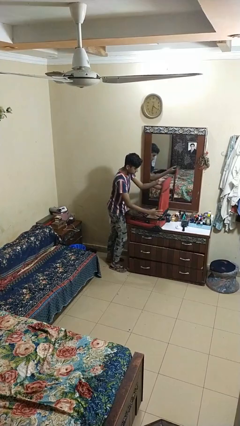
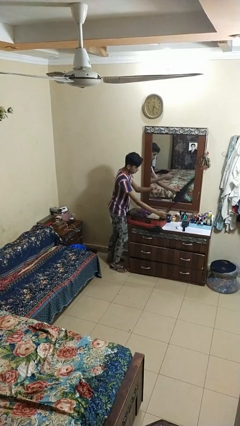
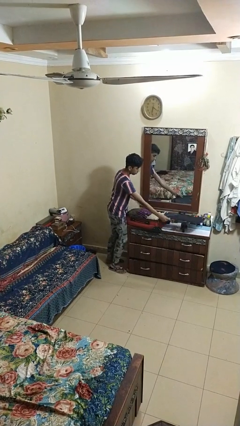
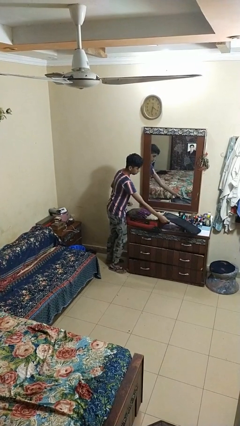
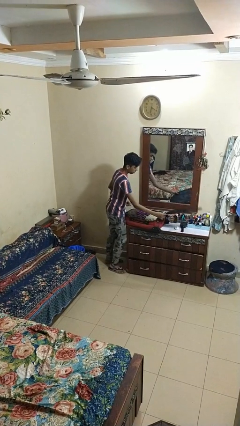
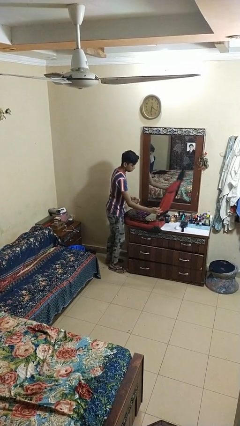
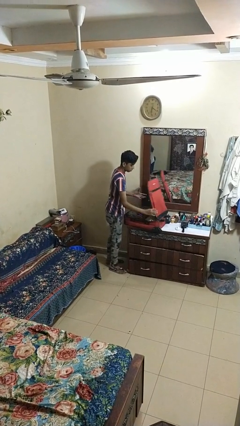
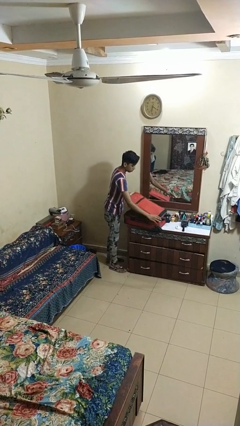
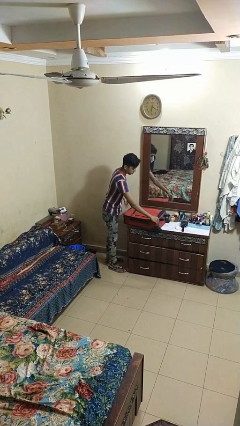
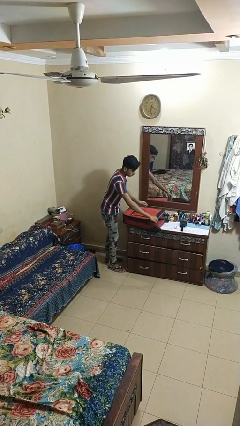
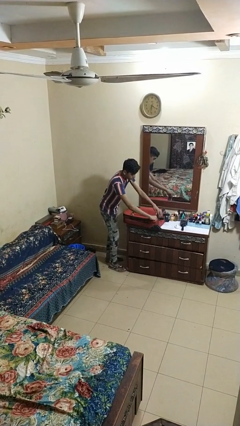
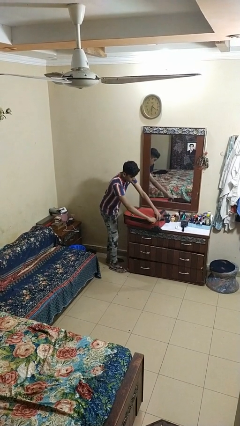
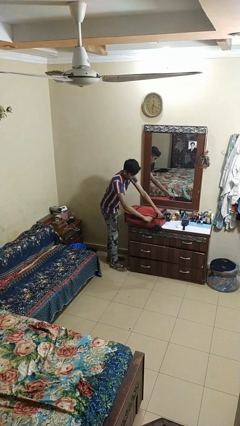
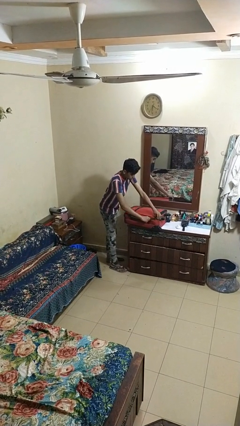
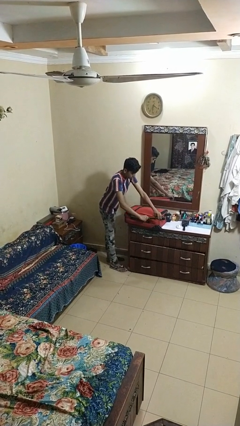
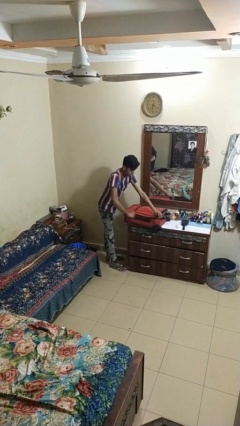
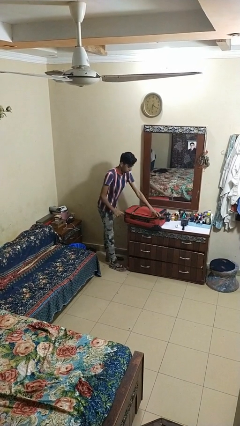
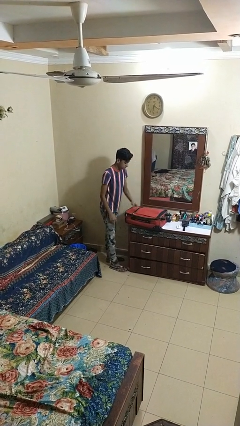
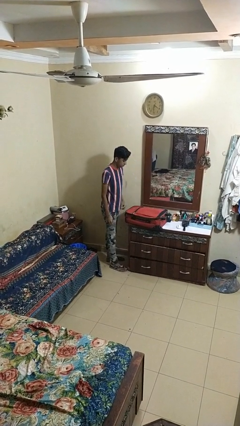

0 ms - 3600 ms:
person closes suitcase

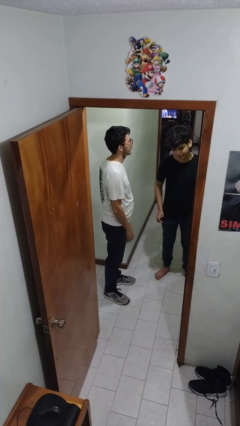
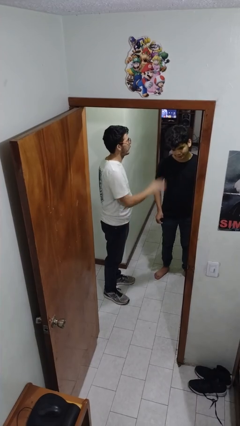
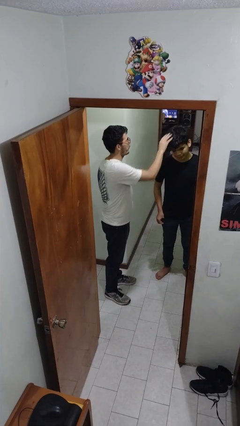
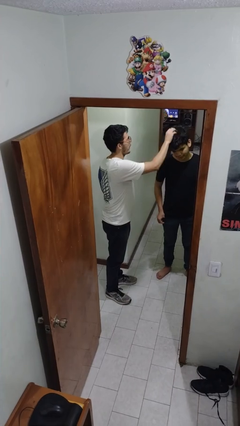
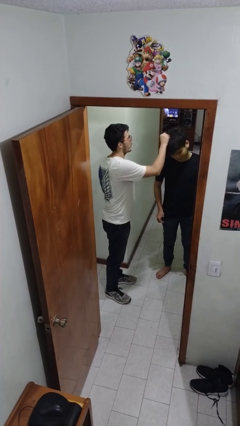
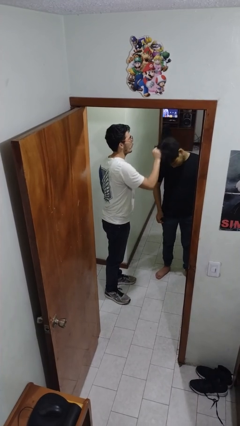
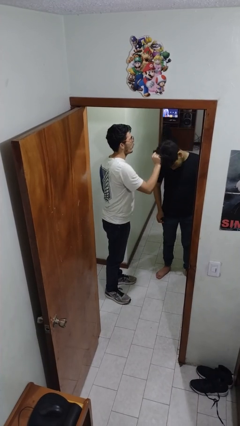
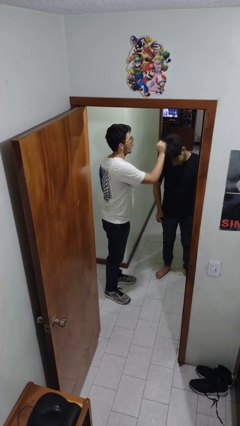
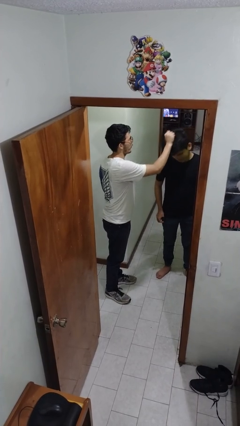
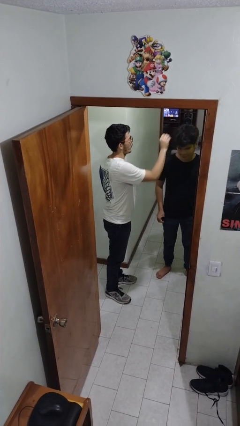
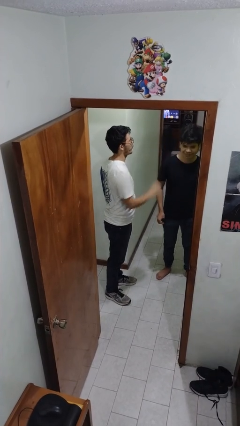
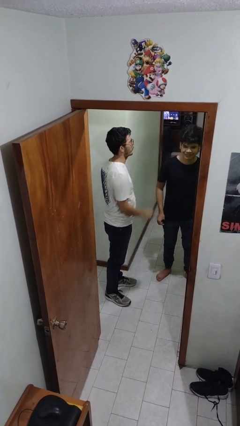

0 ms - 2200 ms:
person grabs person by hair

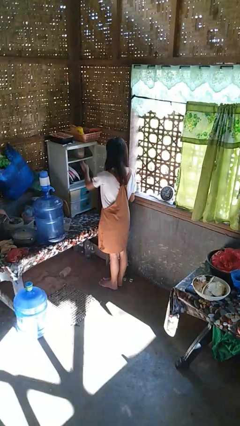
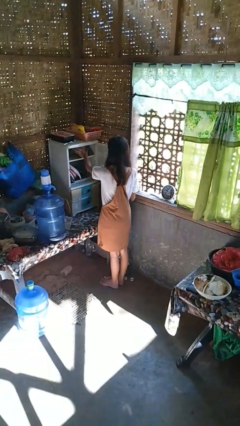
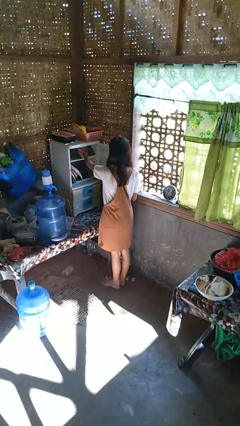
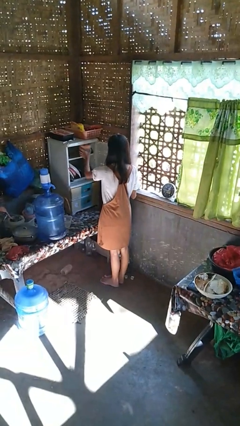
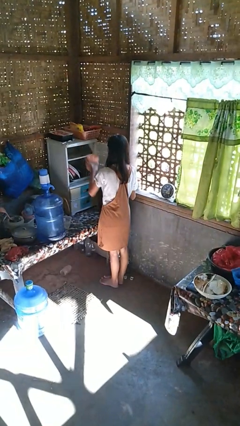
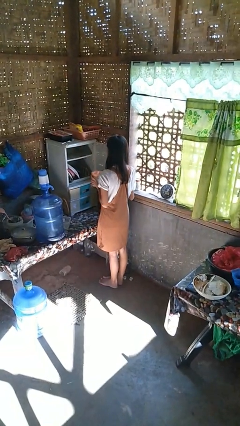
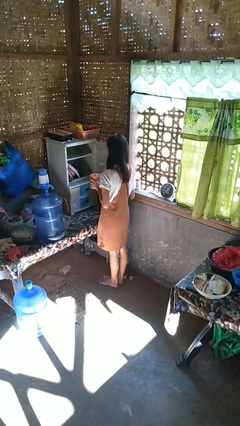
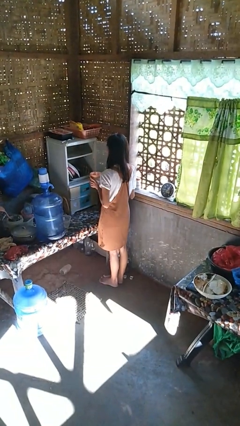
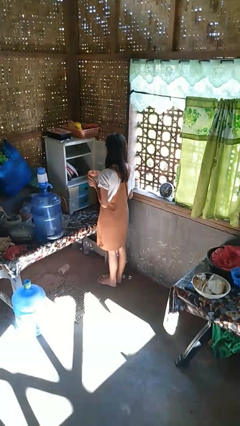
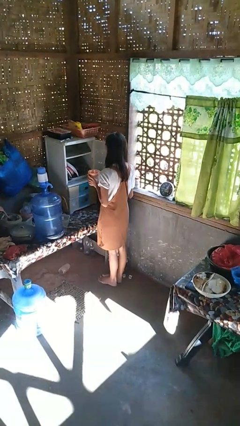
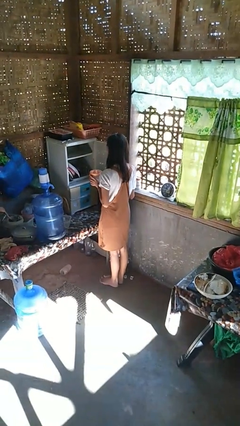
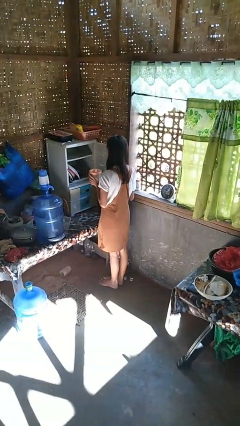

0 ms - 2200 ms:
person picks up object from cabinet

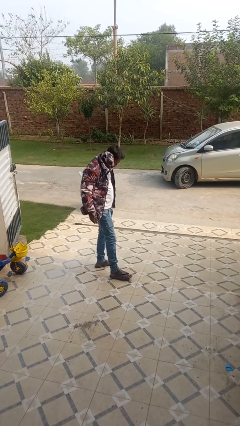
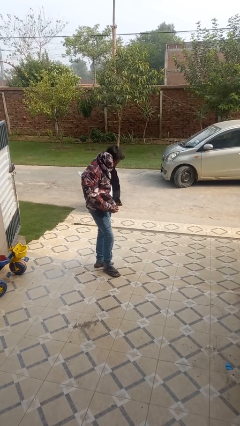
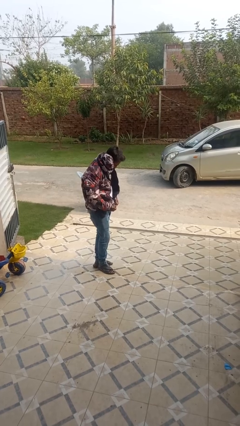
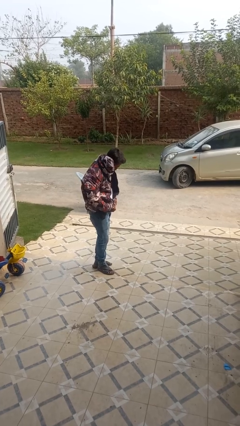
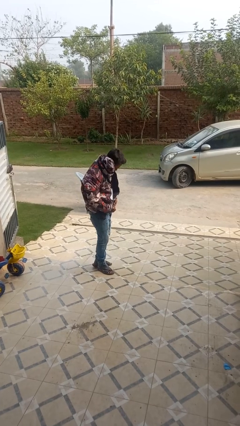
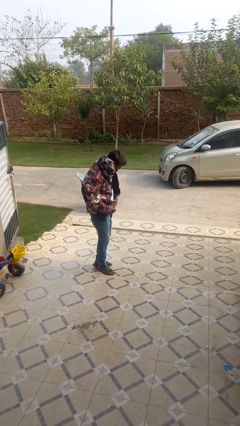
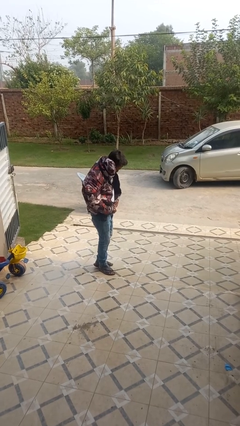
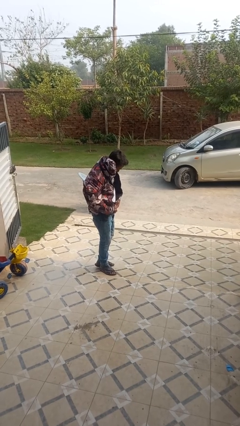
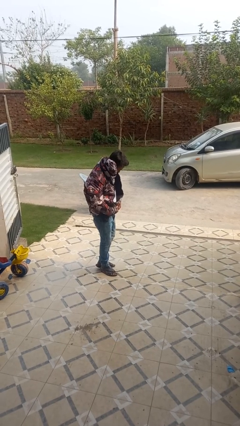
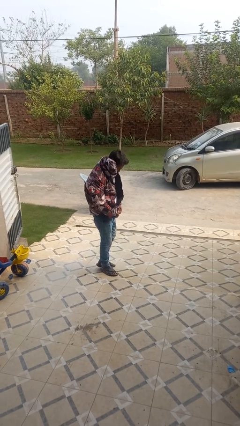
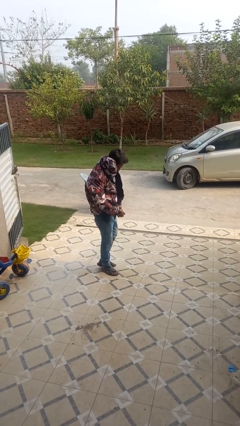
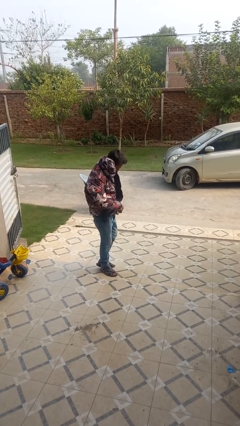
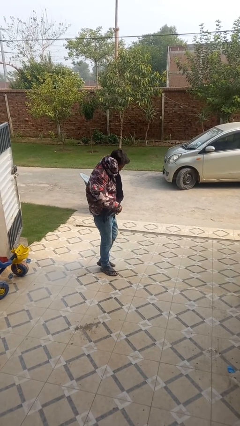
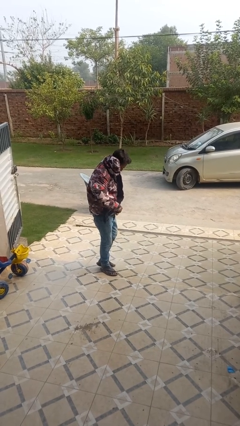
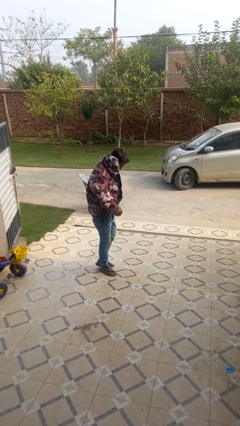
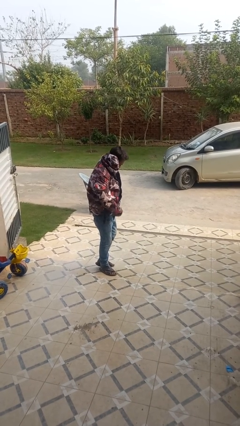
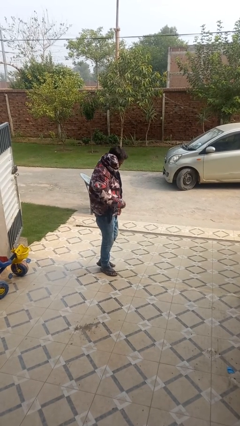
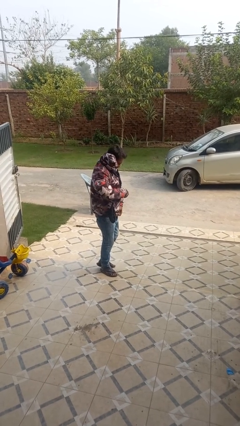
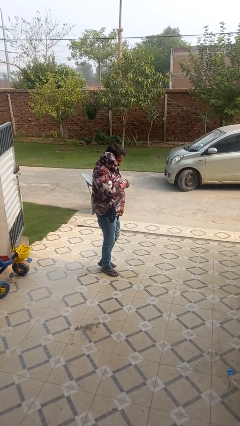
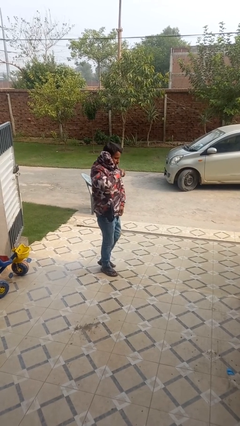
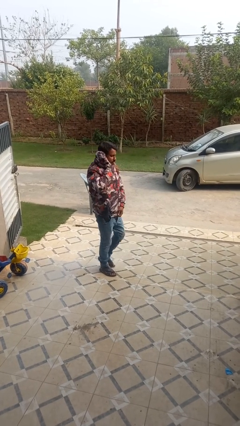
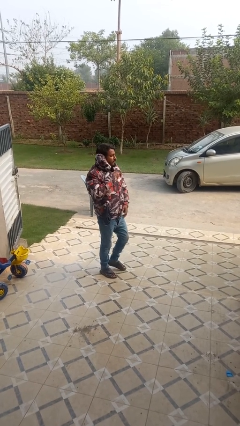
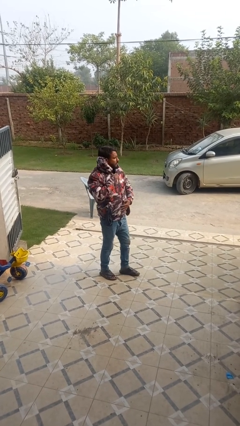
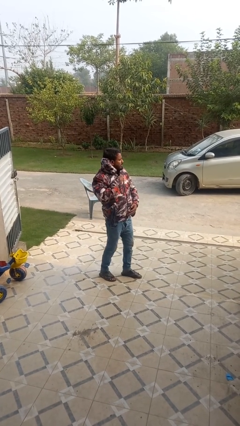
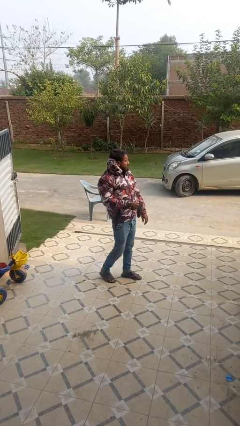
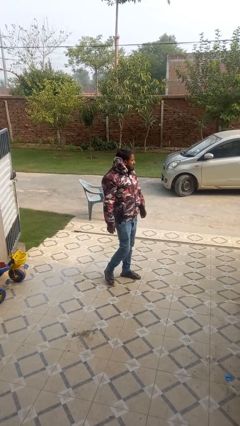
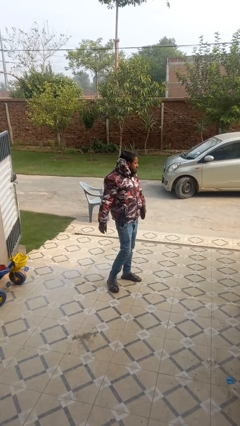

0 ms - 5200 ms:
person zips up jacket

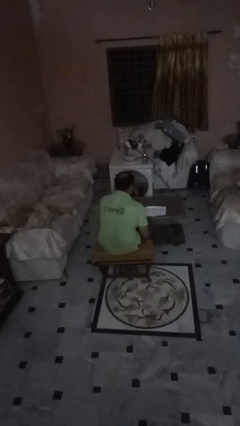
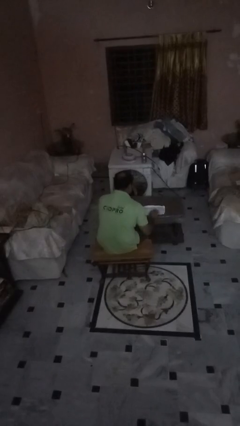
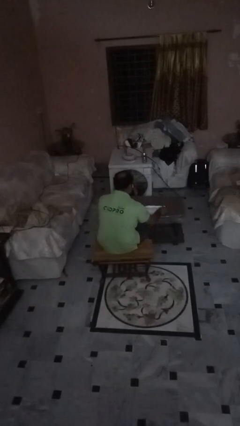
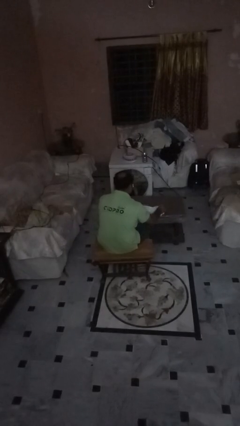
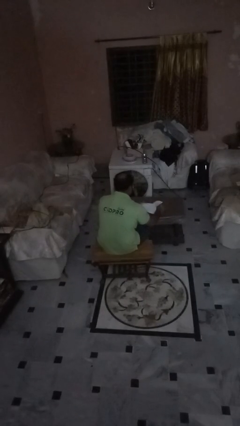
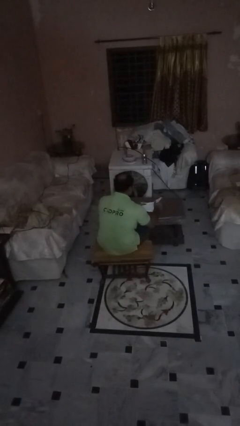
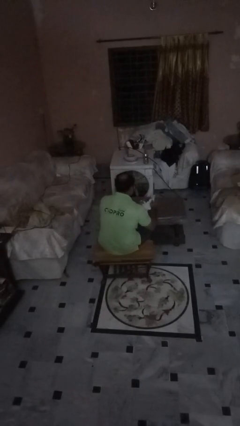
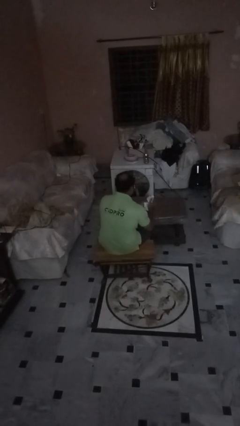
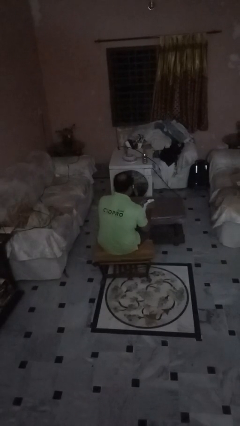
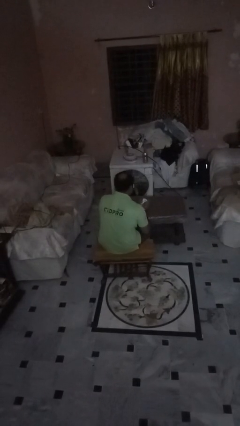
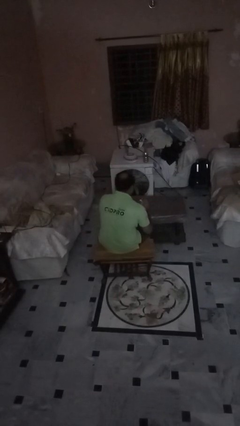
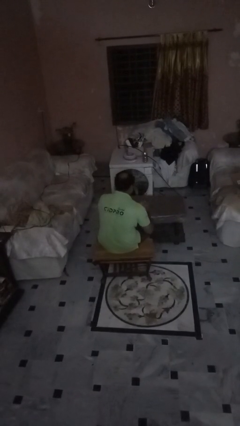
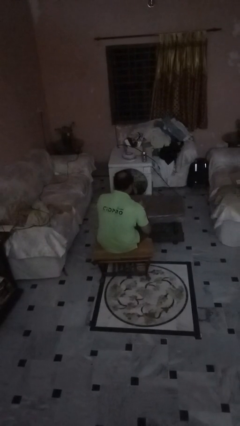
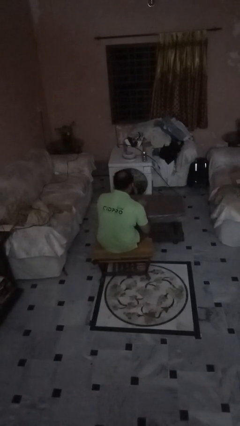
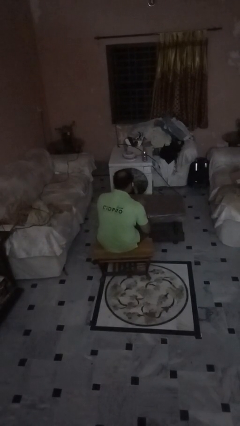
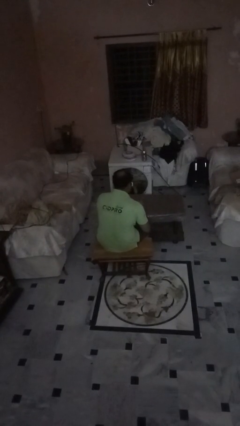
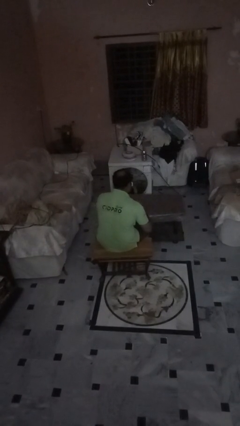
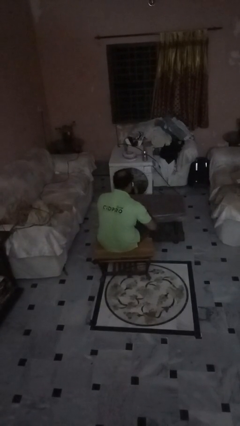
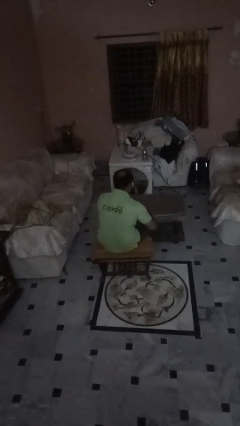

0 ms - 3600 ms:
person crumples paper

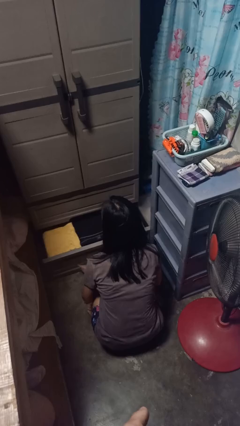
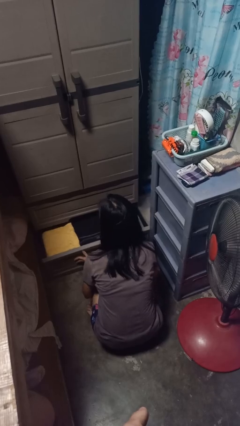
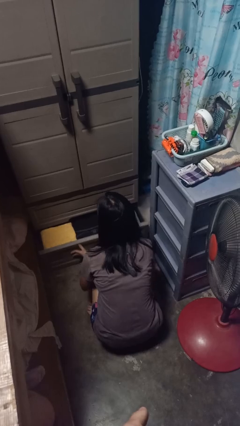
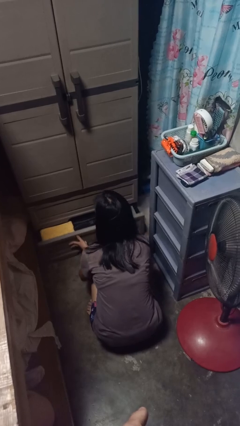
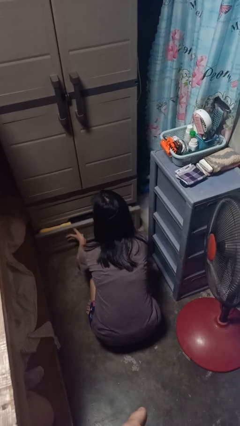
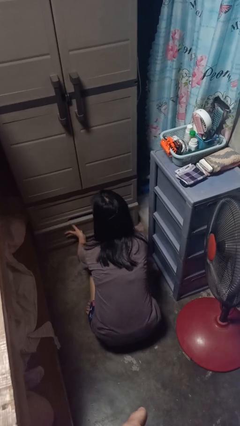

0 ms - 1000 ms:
person closes dresser drawer
